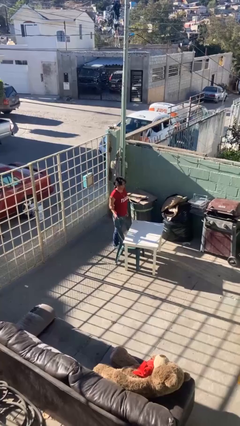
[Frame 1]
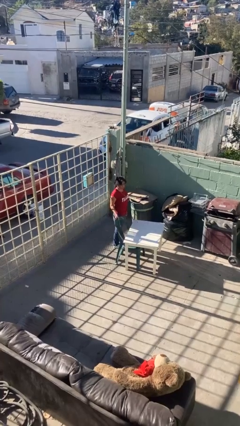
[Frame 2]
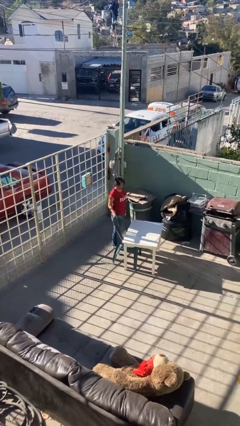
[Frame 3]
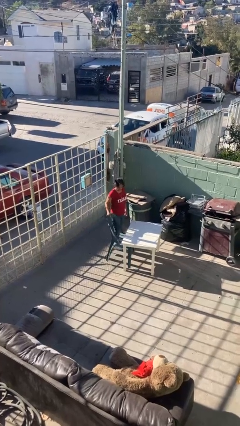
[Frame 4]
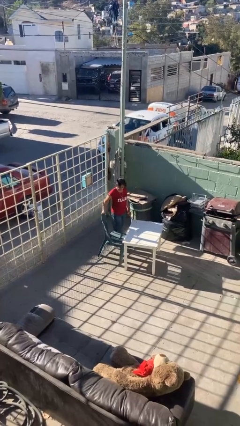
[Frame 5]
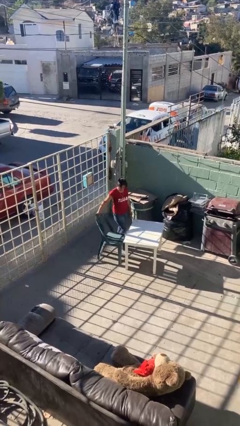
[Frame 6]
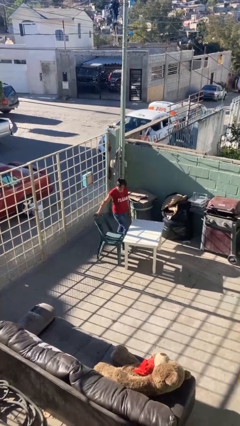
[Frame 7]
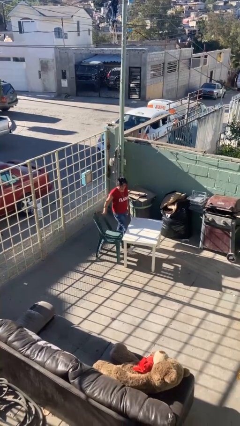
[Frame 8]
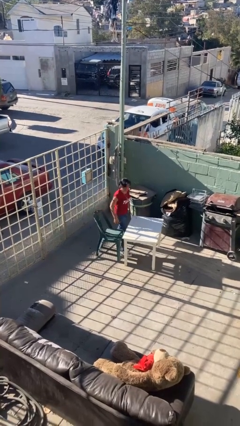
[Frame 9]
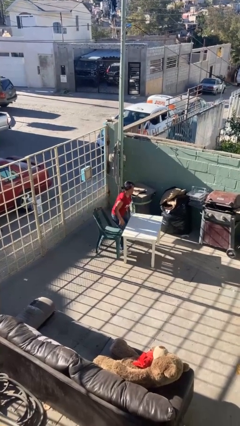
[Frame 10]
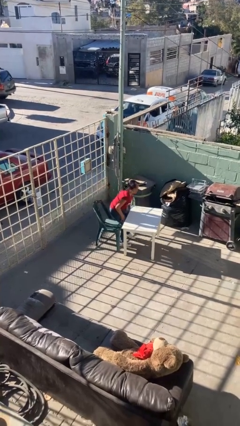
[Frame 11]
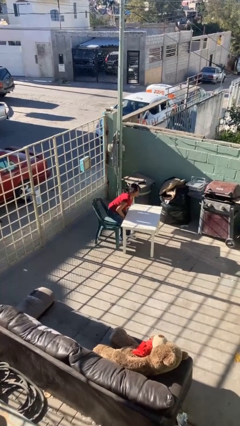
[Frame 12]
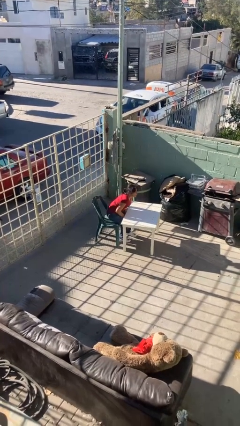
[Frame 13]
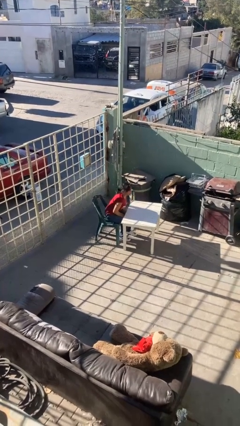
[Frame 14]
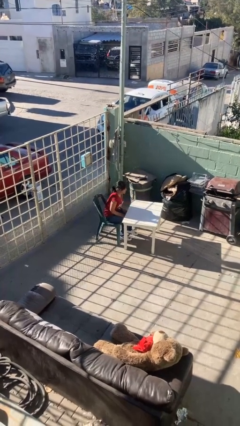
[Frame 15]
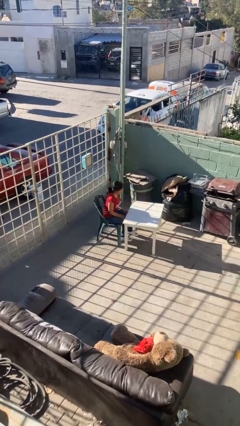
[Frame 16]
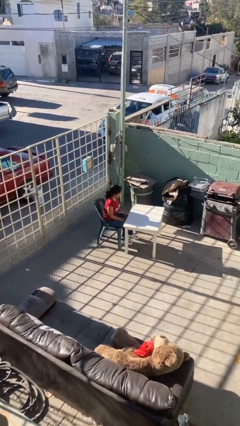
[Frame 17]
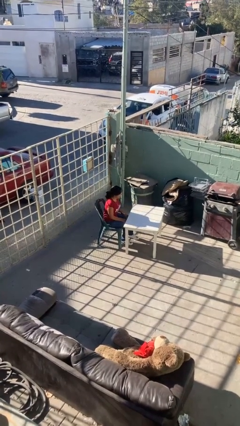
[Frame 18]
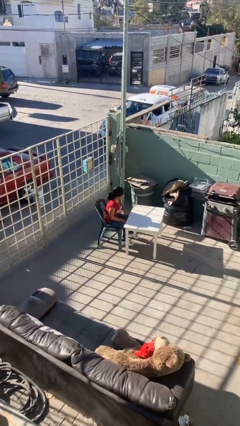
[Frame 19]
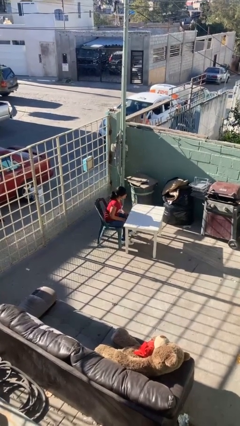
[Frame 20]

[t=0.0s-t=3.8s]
person sits down

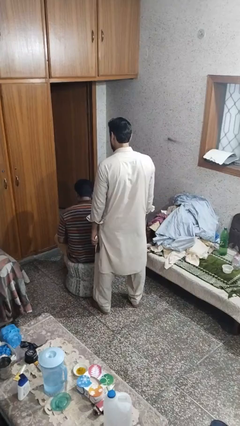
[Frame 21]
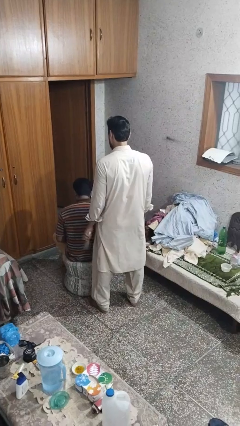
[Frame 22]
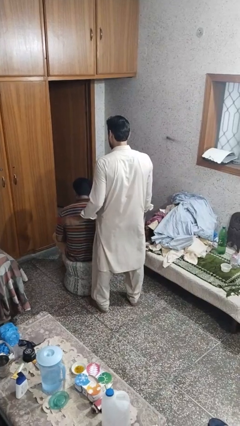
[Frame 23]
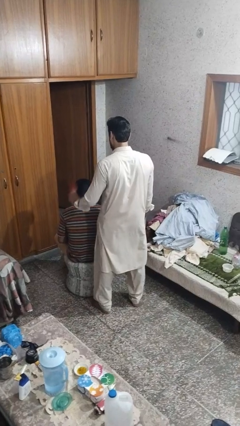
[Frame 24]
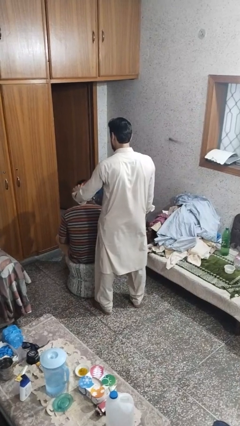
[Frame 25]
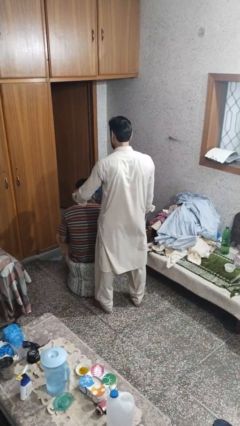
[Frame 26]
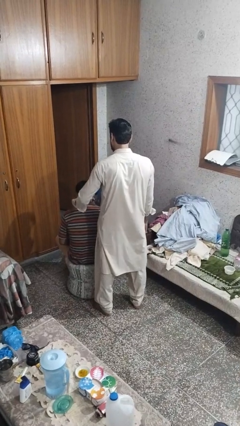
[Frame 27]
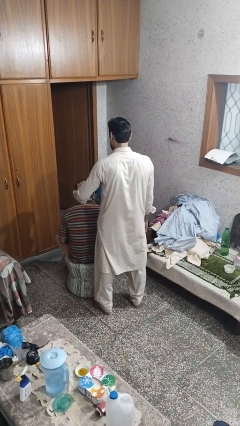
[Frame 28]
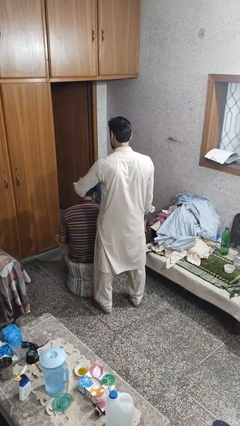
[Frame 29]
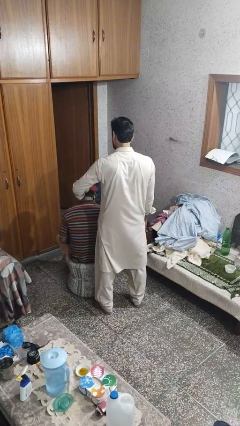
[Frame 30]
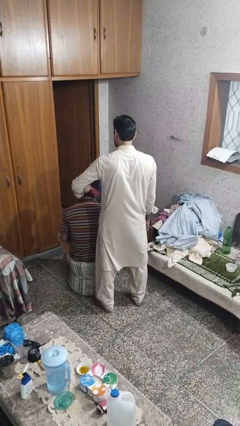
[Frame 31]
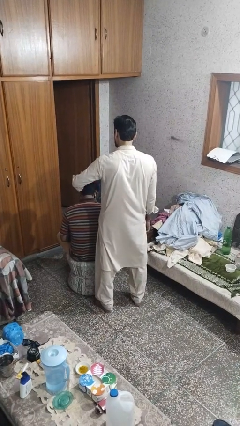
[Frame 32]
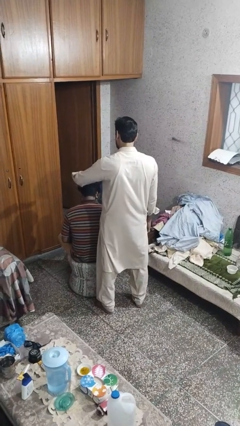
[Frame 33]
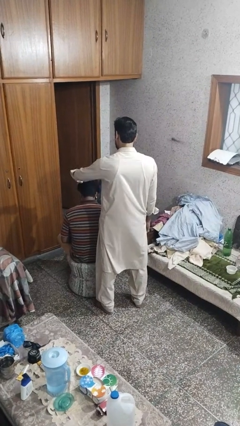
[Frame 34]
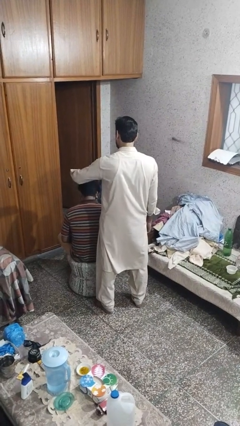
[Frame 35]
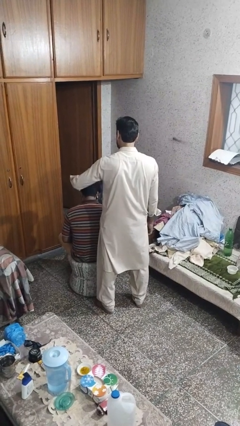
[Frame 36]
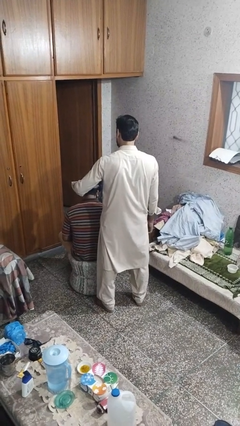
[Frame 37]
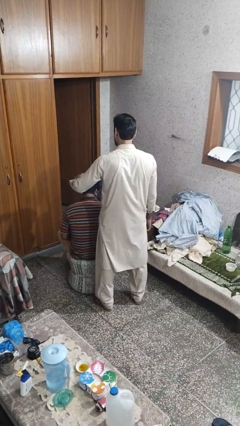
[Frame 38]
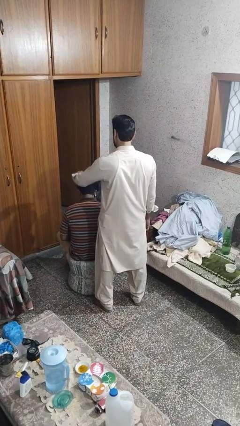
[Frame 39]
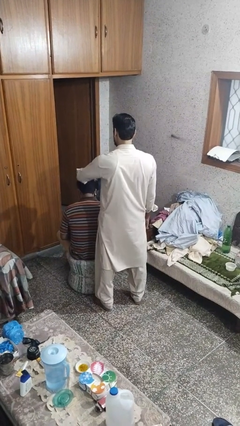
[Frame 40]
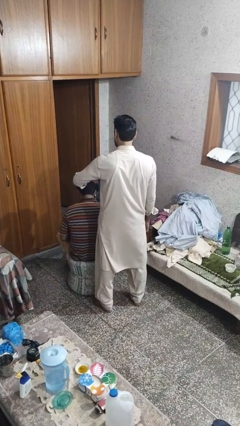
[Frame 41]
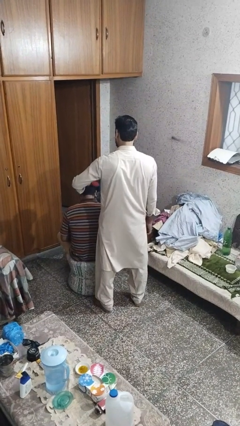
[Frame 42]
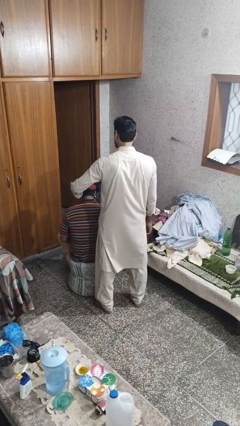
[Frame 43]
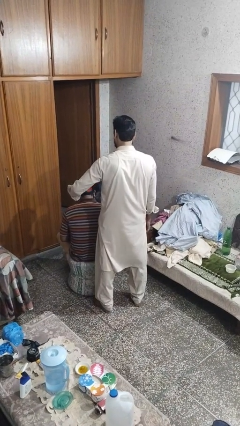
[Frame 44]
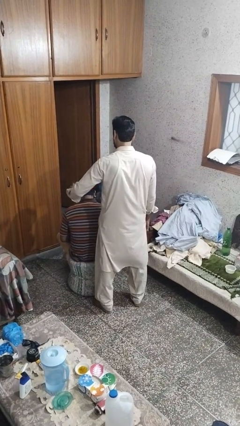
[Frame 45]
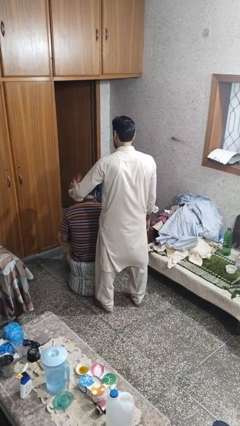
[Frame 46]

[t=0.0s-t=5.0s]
person brushes hair of person

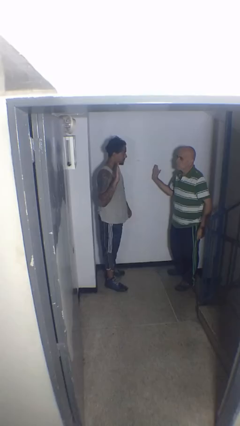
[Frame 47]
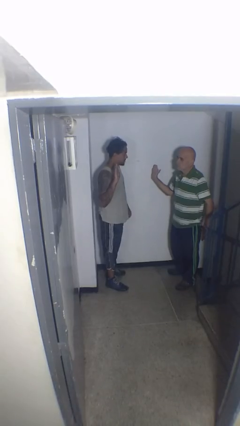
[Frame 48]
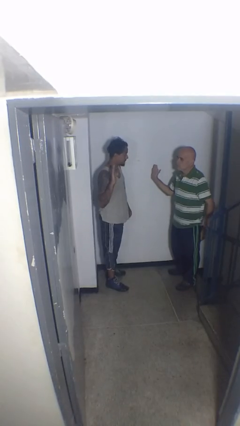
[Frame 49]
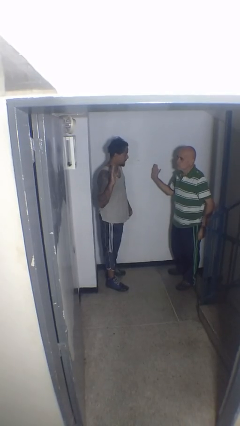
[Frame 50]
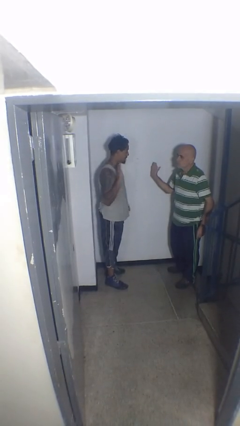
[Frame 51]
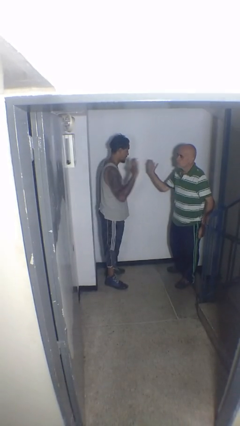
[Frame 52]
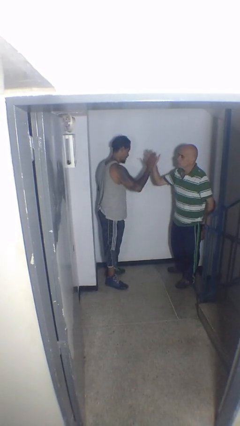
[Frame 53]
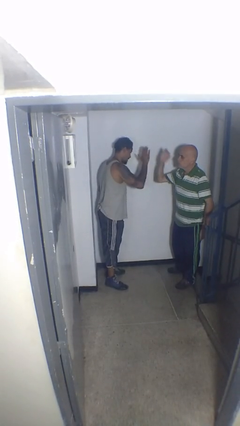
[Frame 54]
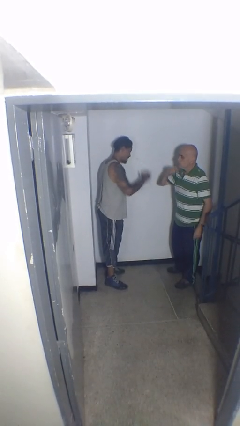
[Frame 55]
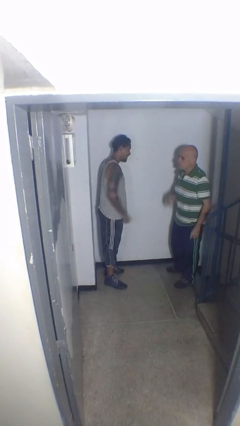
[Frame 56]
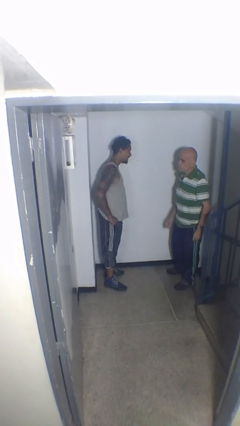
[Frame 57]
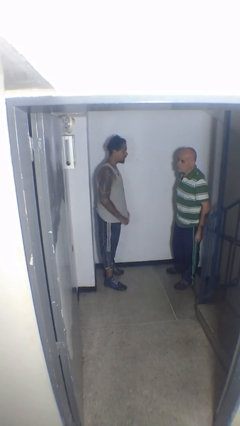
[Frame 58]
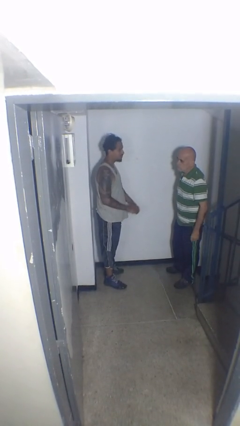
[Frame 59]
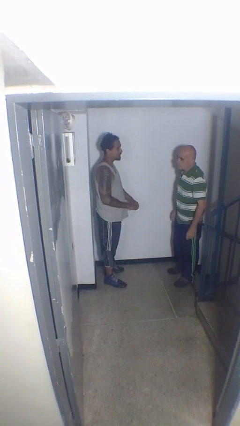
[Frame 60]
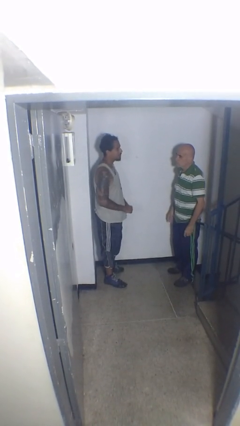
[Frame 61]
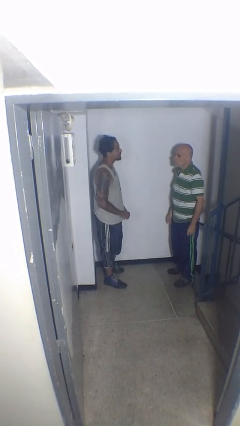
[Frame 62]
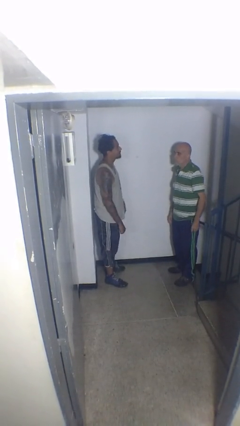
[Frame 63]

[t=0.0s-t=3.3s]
person highfives hand

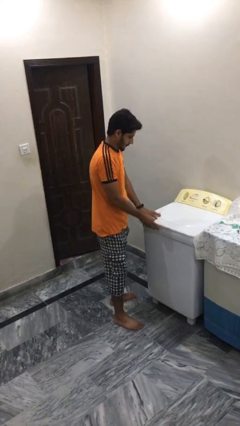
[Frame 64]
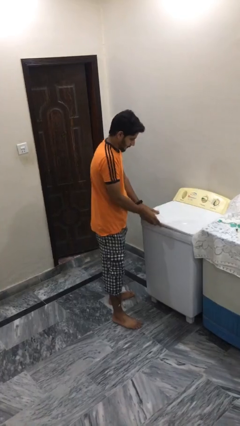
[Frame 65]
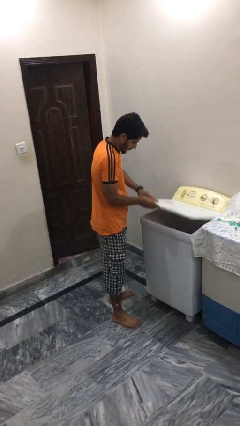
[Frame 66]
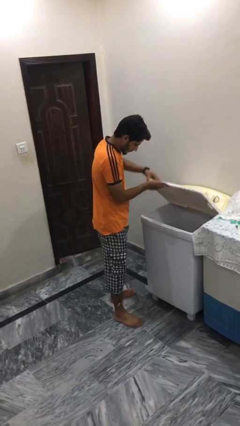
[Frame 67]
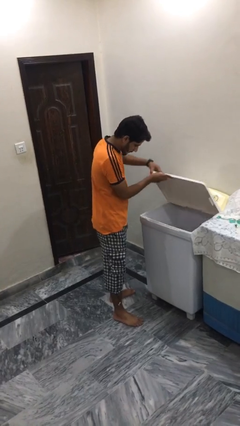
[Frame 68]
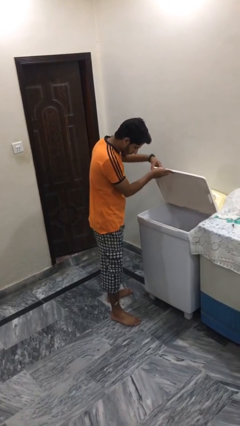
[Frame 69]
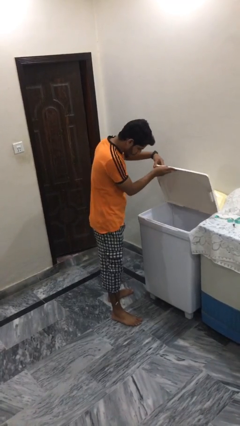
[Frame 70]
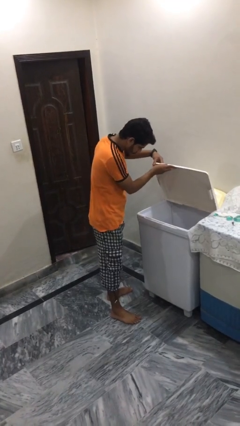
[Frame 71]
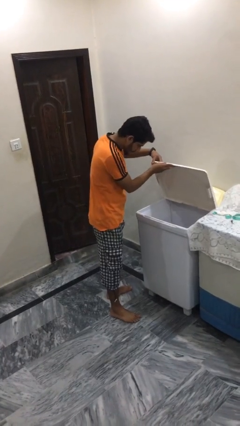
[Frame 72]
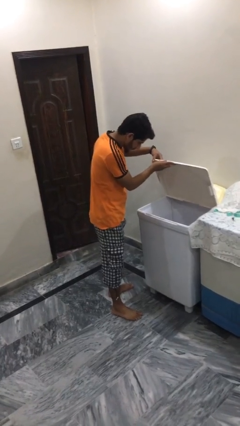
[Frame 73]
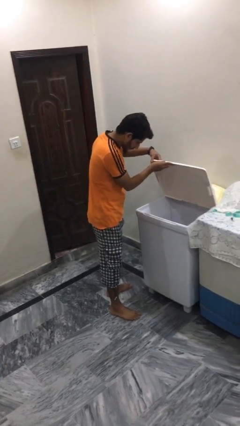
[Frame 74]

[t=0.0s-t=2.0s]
person opens clothes washer

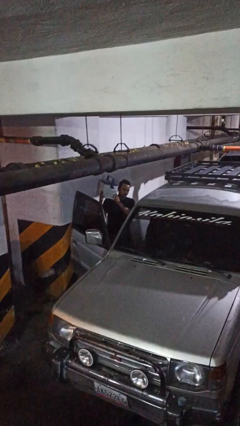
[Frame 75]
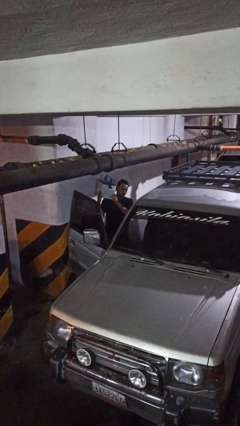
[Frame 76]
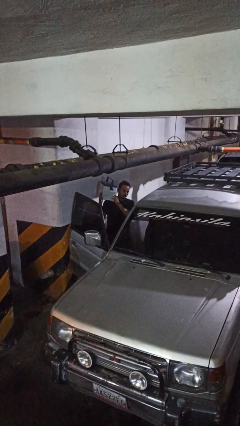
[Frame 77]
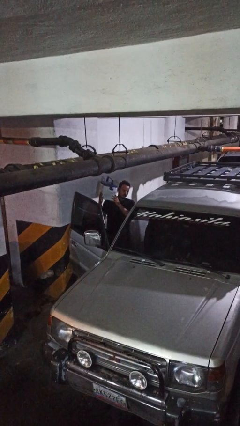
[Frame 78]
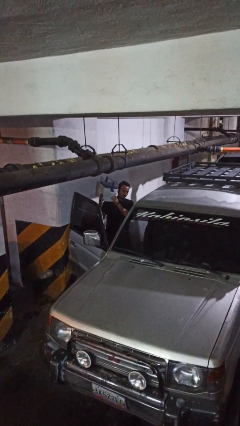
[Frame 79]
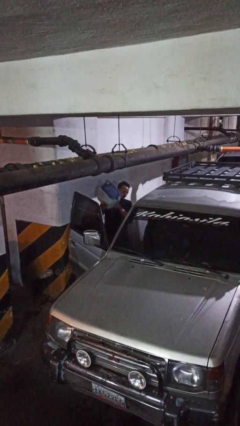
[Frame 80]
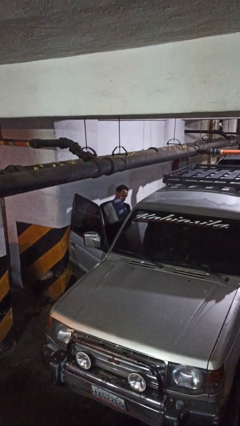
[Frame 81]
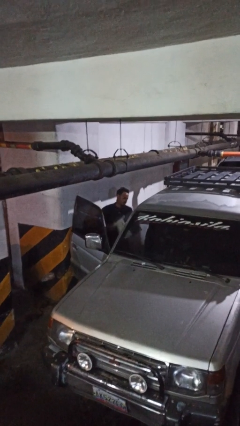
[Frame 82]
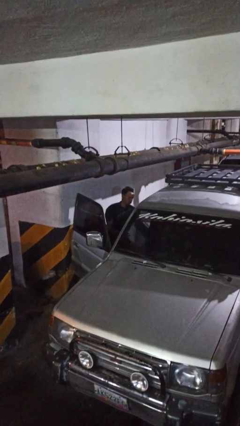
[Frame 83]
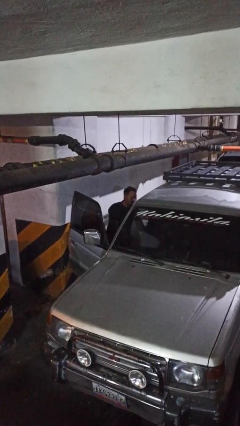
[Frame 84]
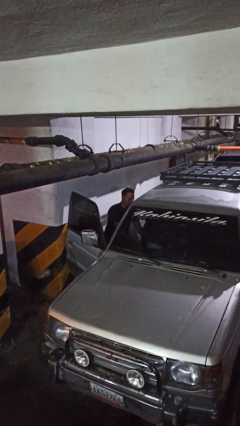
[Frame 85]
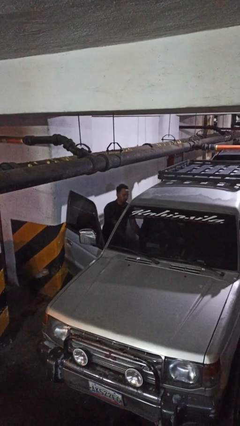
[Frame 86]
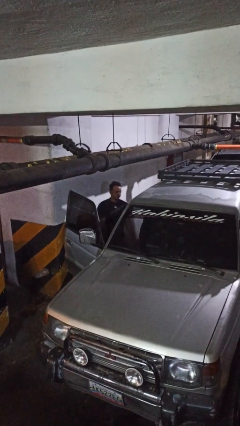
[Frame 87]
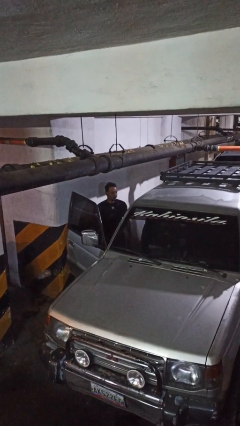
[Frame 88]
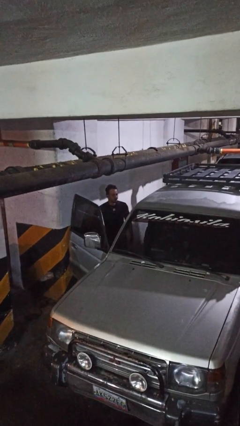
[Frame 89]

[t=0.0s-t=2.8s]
person loads car
